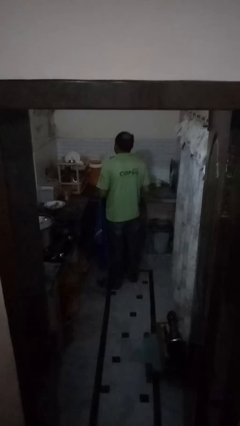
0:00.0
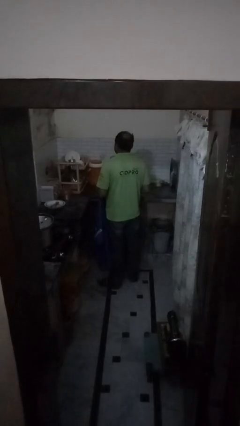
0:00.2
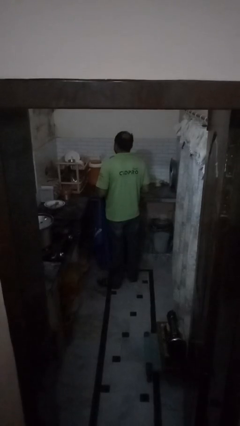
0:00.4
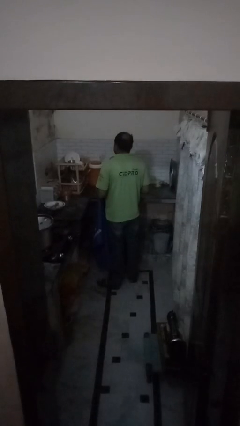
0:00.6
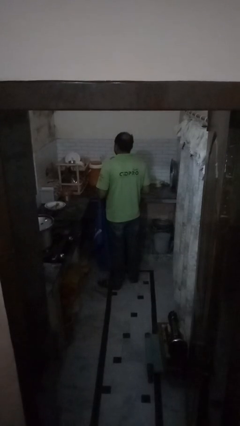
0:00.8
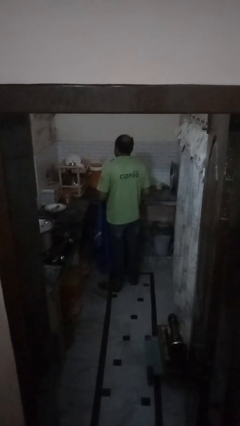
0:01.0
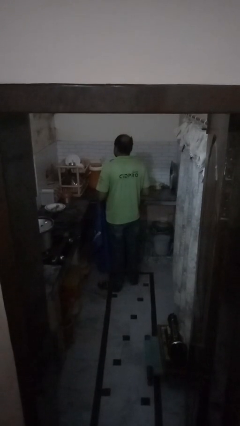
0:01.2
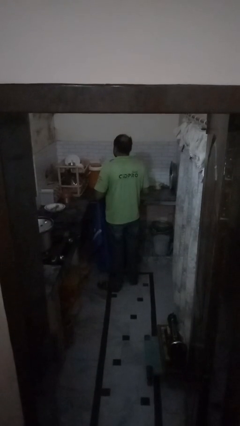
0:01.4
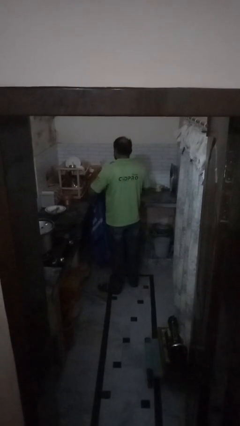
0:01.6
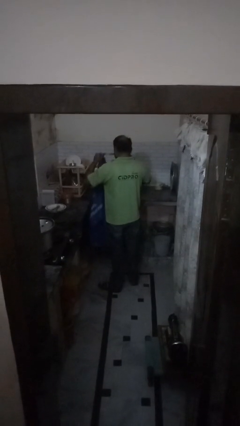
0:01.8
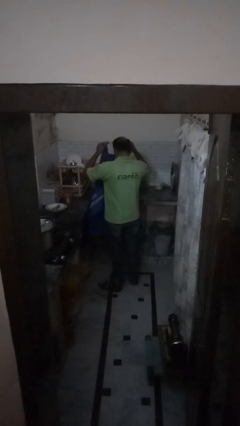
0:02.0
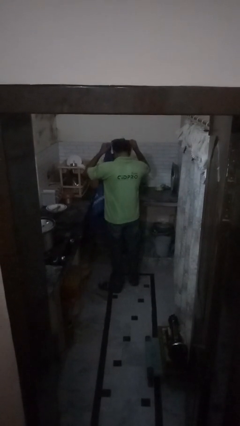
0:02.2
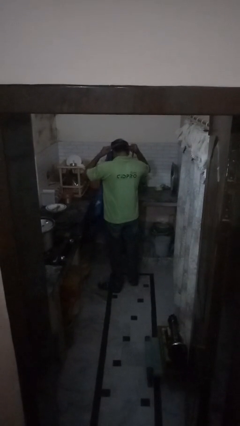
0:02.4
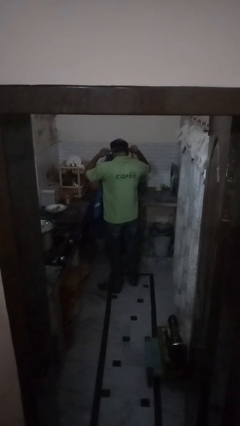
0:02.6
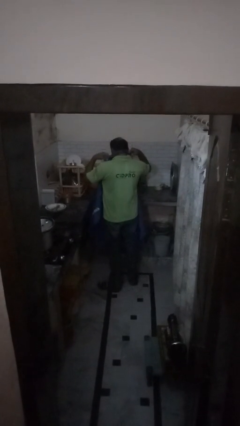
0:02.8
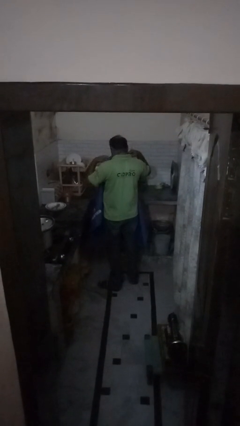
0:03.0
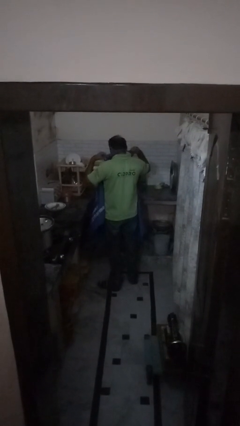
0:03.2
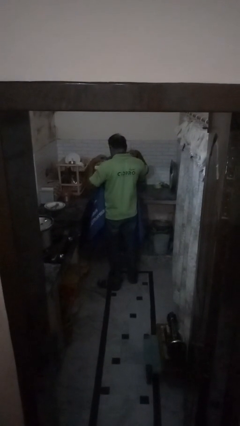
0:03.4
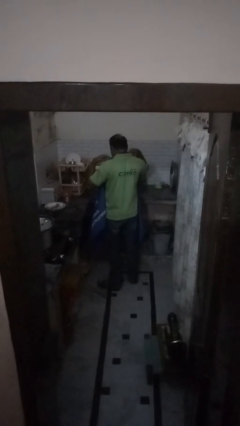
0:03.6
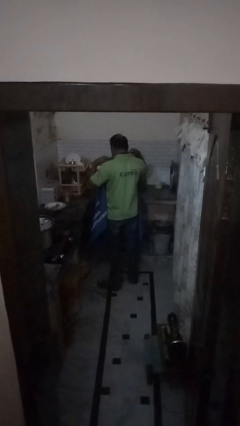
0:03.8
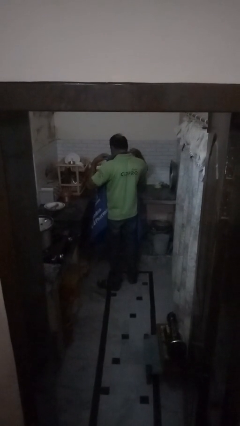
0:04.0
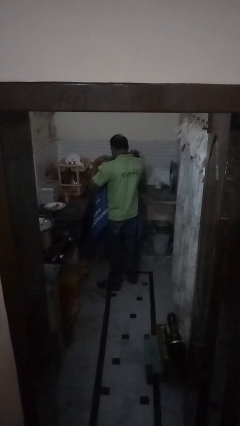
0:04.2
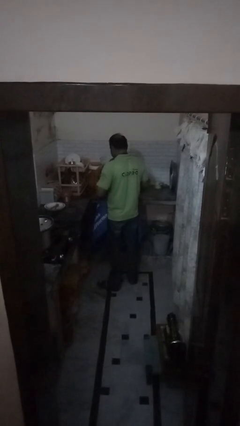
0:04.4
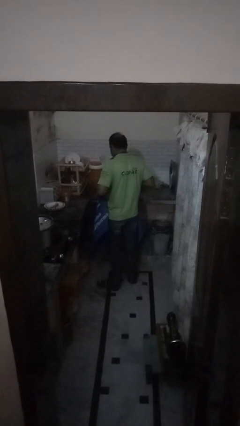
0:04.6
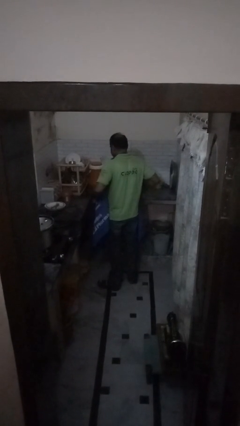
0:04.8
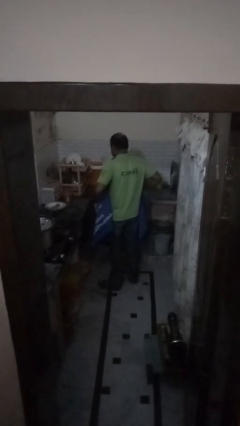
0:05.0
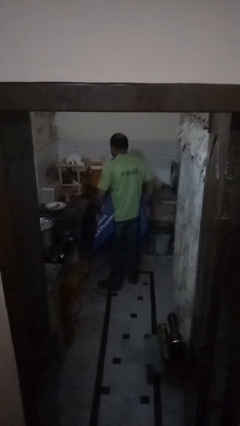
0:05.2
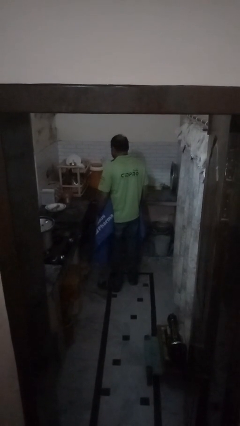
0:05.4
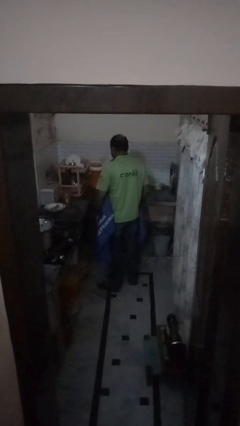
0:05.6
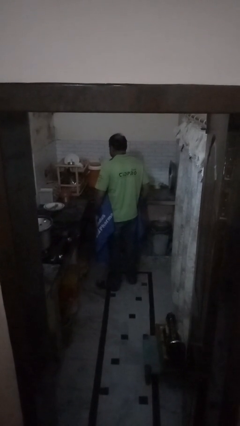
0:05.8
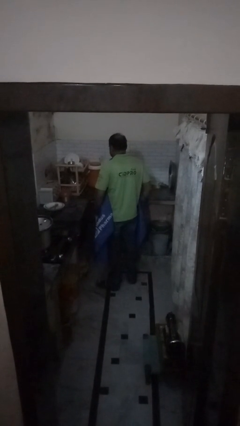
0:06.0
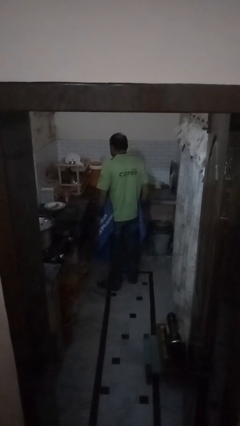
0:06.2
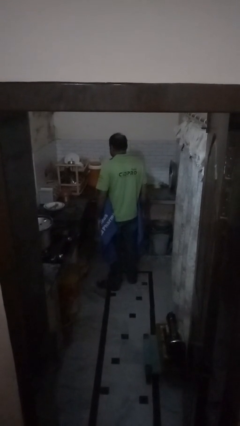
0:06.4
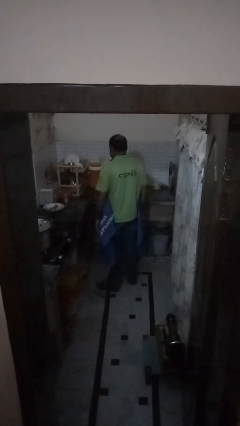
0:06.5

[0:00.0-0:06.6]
person puts on apron

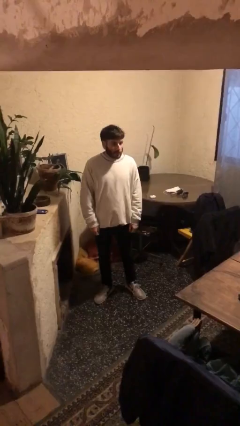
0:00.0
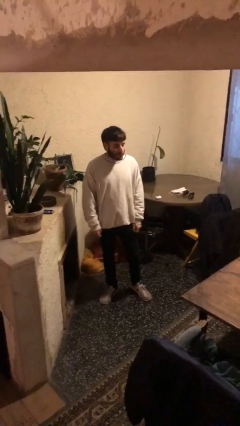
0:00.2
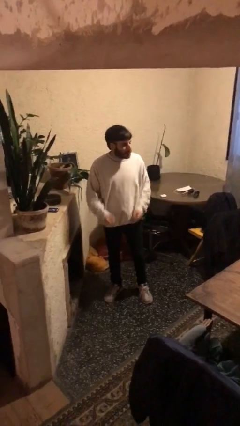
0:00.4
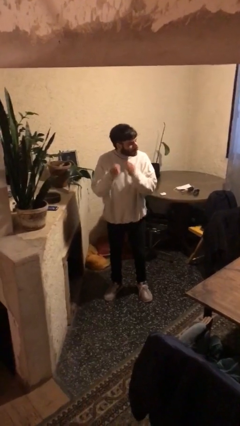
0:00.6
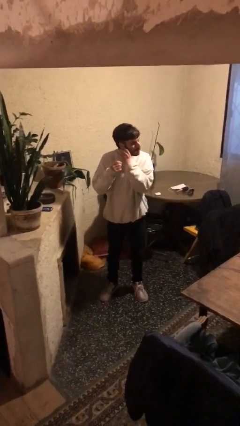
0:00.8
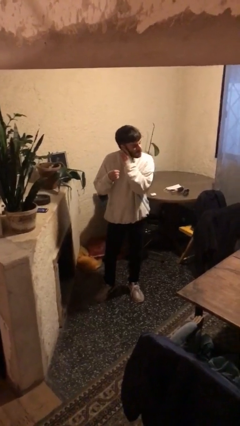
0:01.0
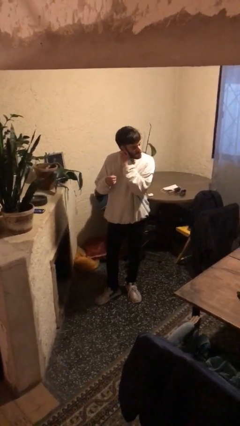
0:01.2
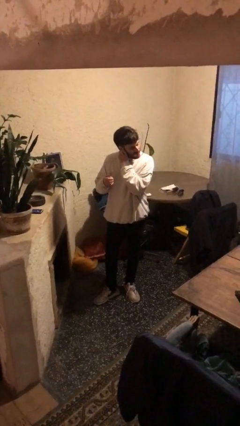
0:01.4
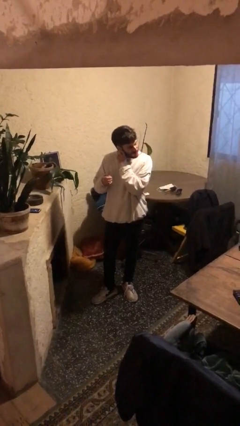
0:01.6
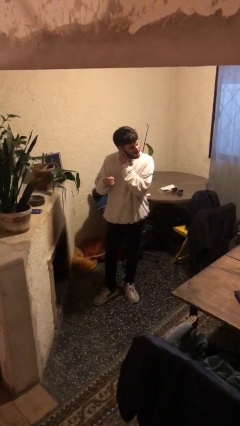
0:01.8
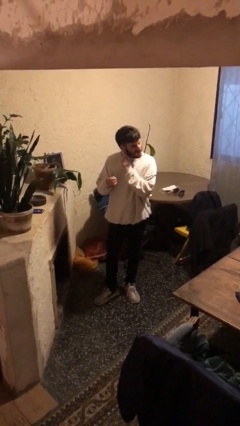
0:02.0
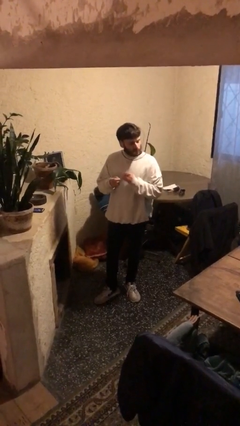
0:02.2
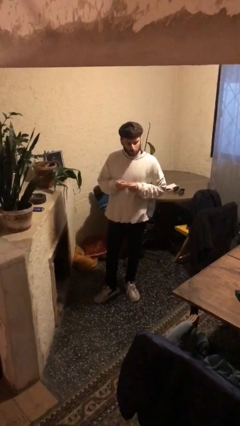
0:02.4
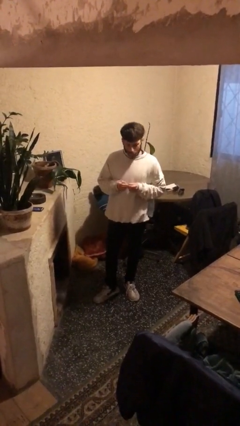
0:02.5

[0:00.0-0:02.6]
person takes off earrings

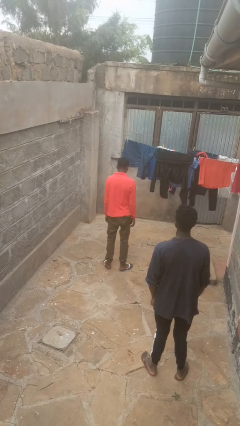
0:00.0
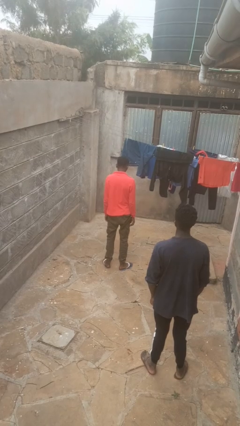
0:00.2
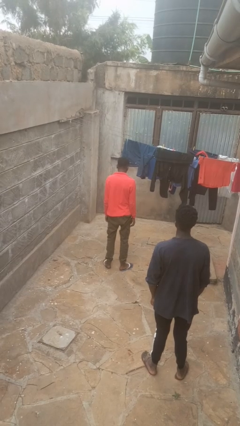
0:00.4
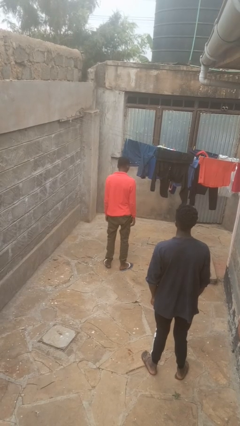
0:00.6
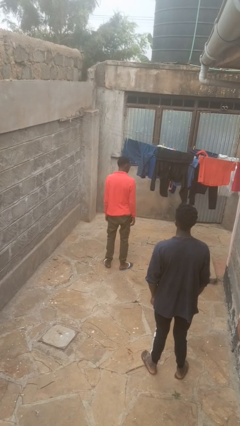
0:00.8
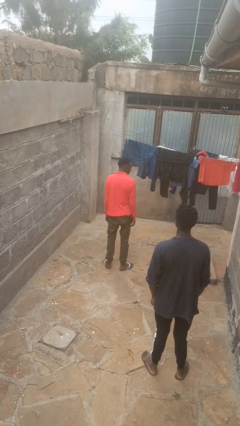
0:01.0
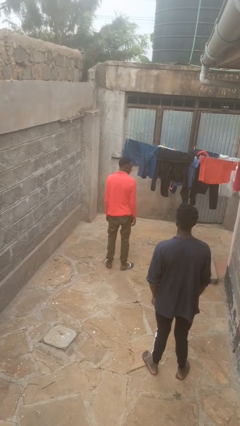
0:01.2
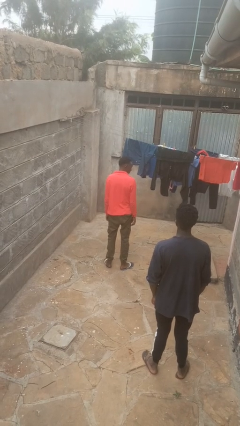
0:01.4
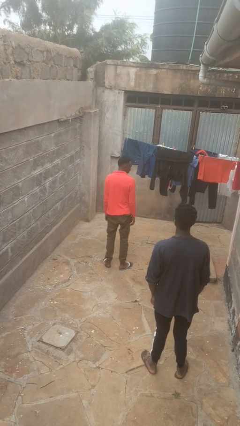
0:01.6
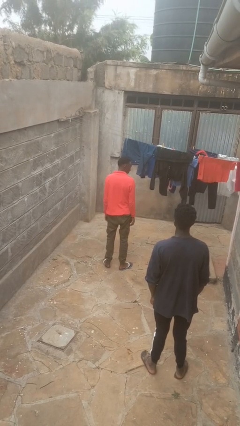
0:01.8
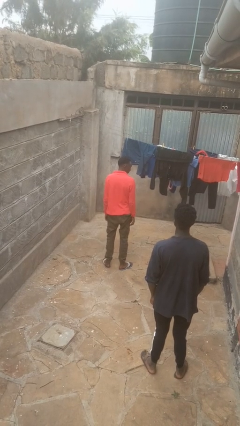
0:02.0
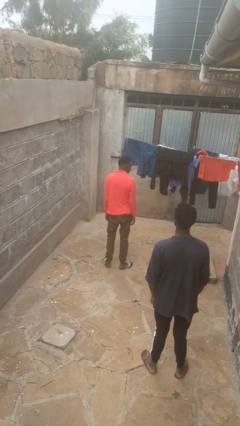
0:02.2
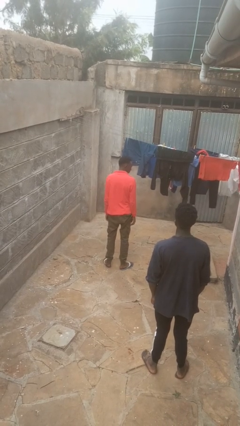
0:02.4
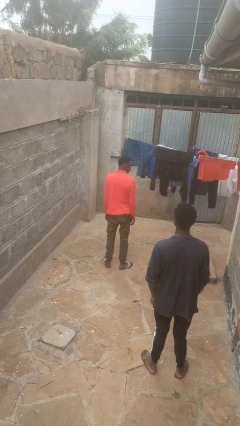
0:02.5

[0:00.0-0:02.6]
person looks over shoulder

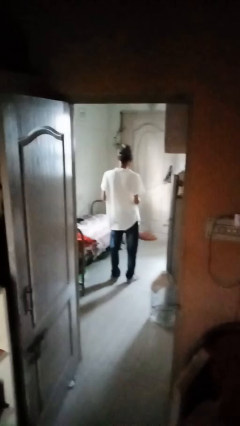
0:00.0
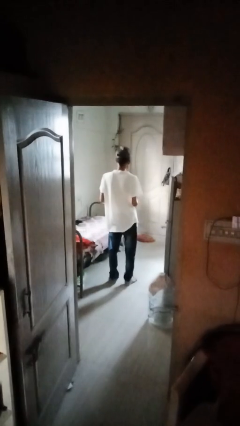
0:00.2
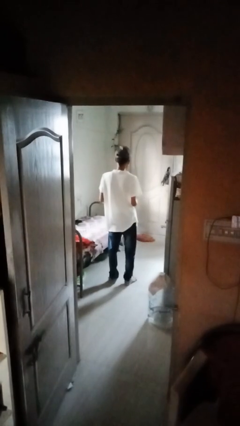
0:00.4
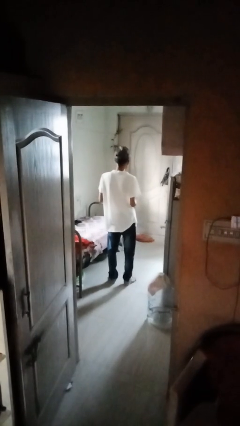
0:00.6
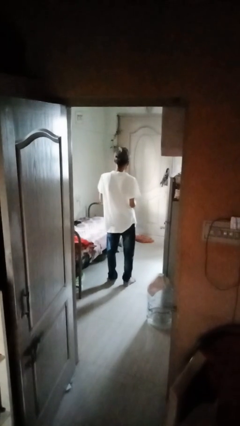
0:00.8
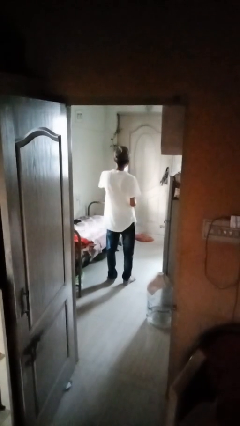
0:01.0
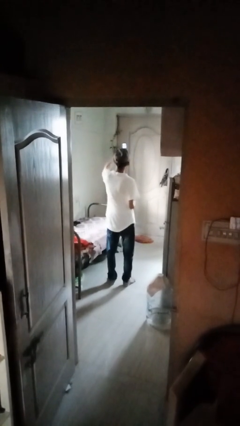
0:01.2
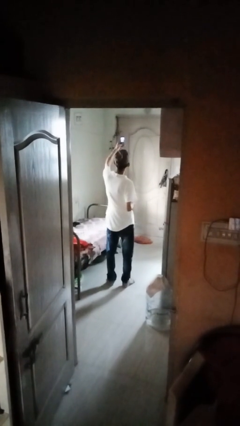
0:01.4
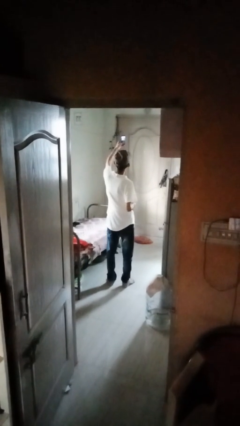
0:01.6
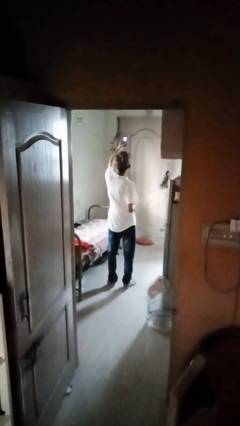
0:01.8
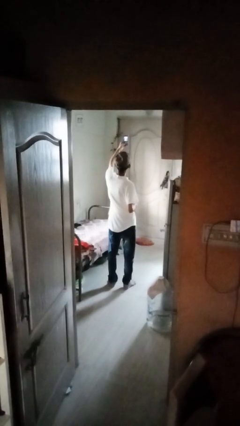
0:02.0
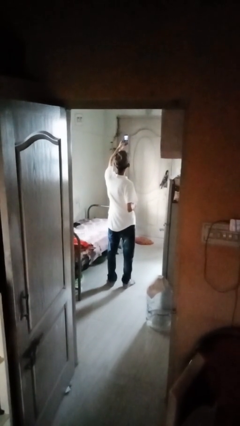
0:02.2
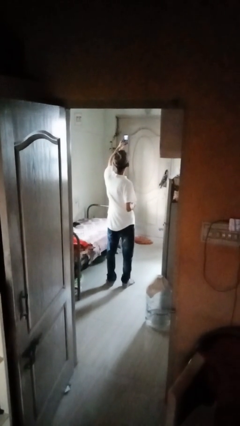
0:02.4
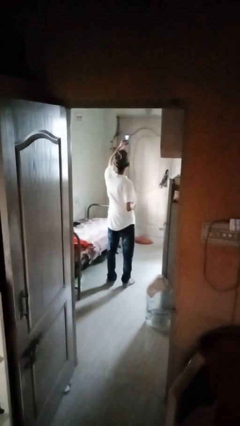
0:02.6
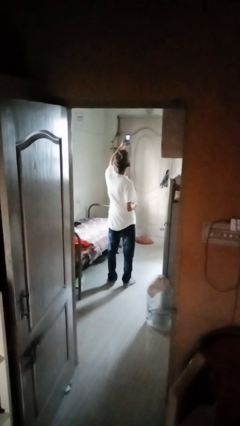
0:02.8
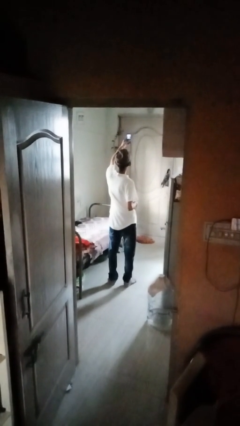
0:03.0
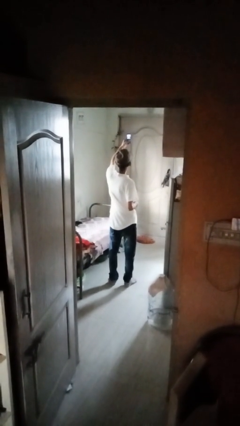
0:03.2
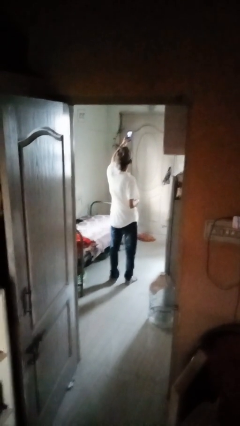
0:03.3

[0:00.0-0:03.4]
person takes selfie

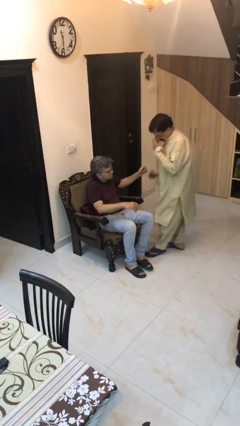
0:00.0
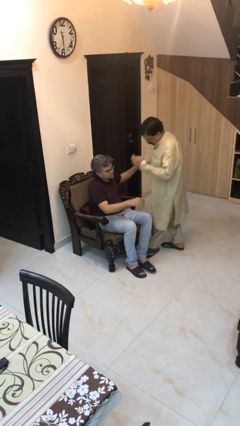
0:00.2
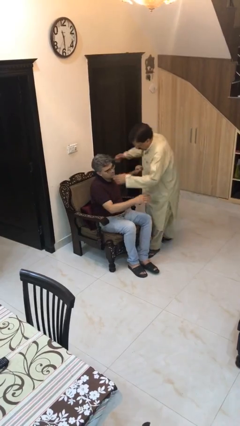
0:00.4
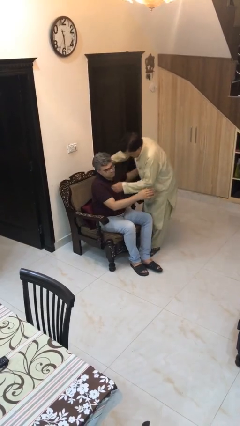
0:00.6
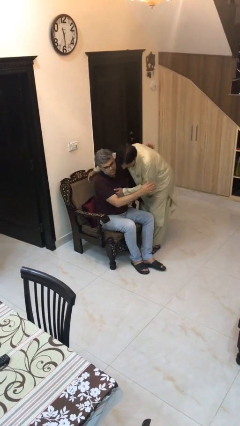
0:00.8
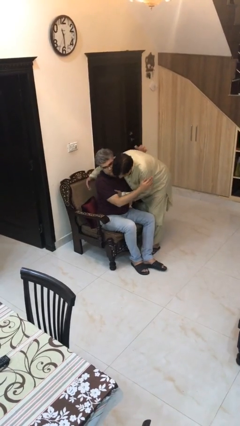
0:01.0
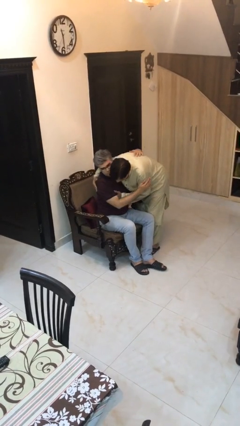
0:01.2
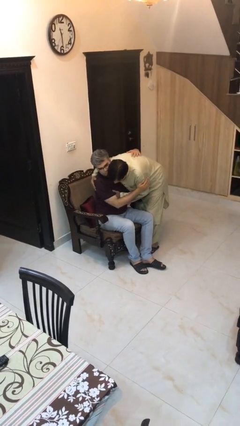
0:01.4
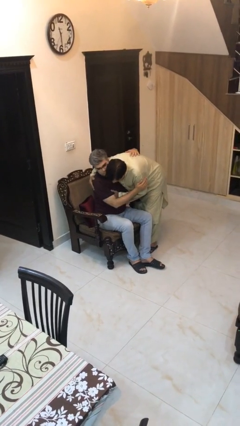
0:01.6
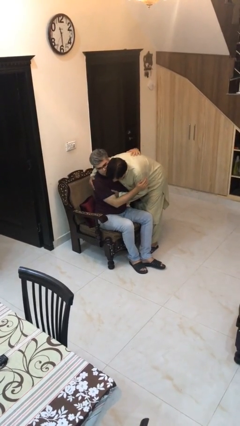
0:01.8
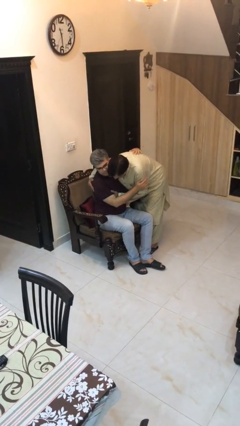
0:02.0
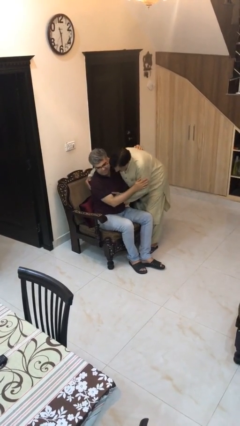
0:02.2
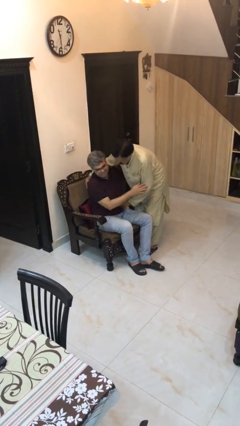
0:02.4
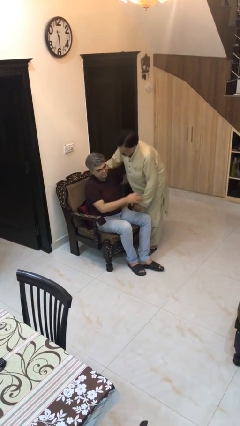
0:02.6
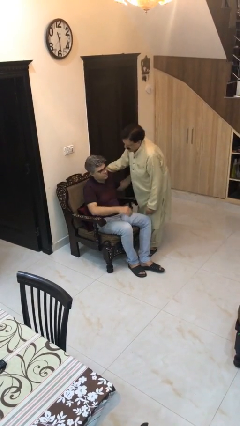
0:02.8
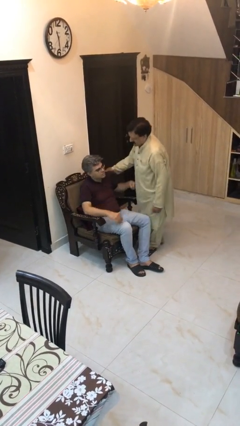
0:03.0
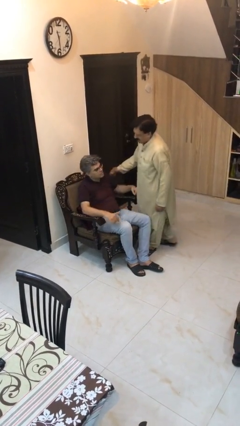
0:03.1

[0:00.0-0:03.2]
person embraces person
